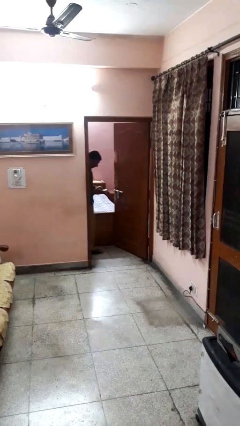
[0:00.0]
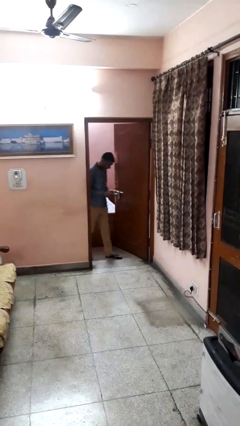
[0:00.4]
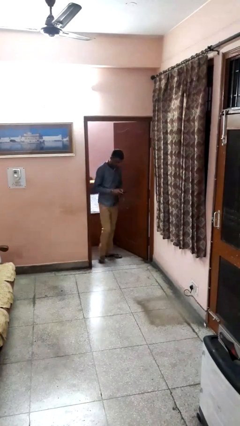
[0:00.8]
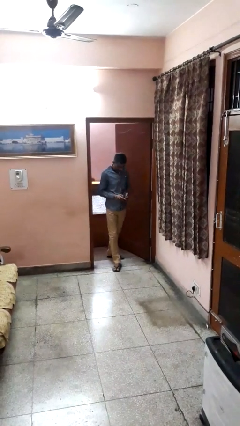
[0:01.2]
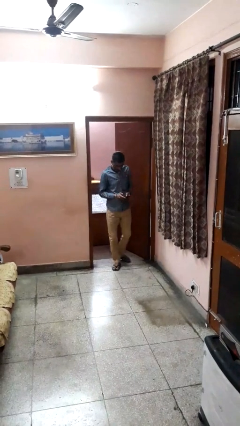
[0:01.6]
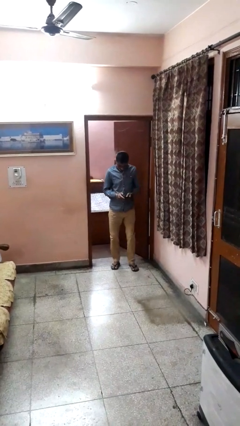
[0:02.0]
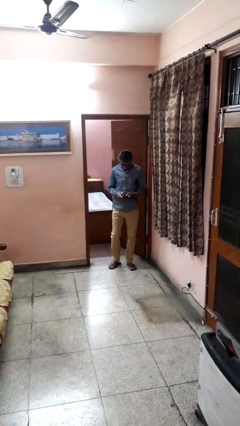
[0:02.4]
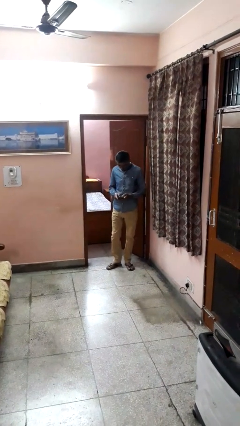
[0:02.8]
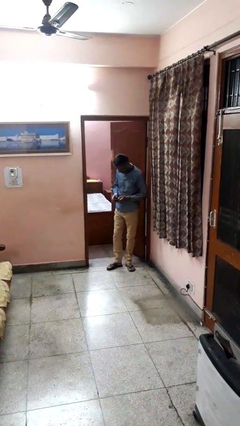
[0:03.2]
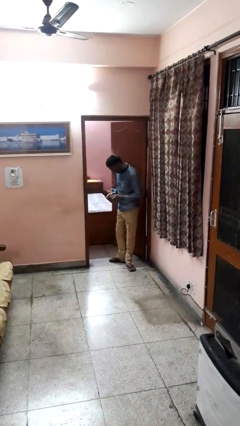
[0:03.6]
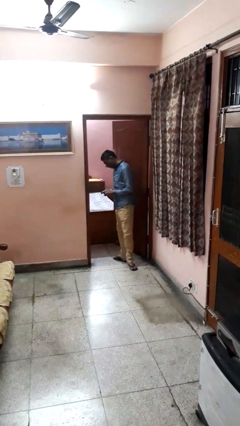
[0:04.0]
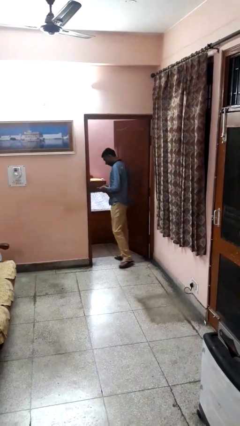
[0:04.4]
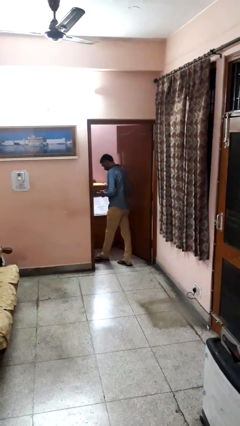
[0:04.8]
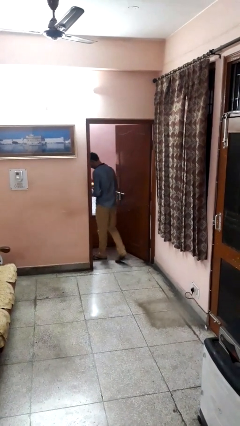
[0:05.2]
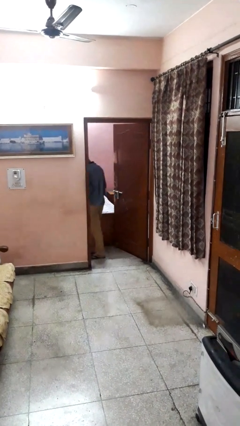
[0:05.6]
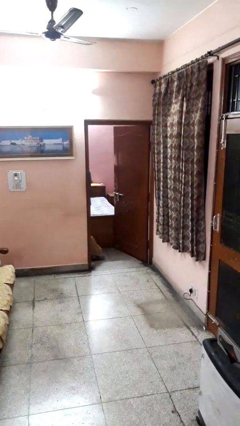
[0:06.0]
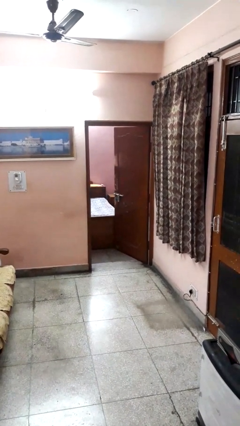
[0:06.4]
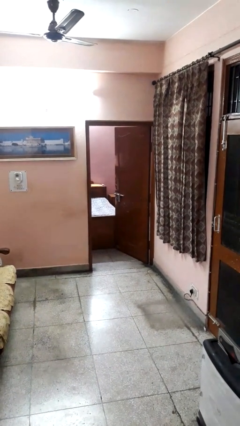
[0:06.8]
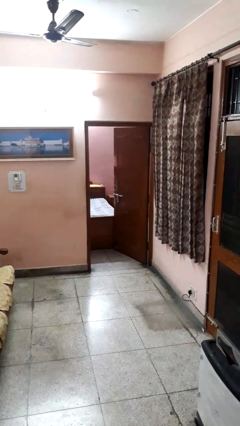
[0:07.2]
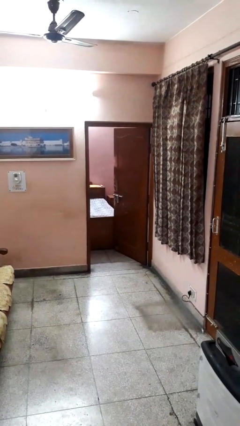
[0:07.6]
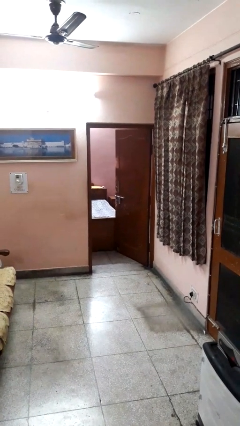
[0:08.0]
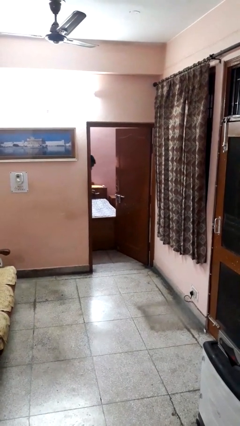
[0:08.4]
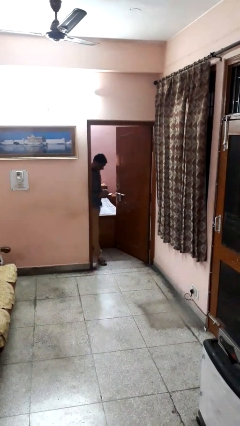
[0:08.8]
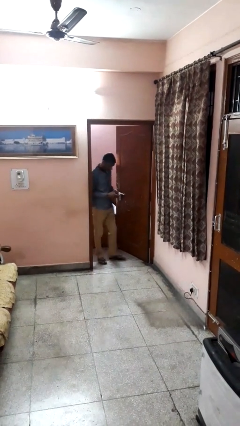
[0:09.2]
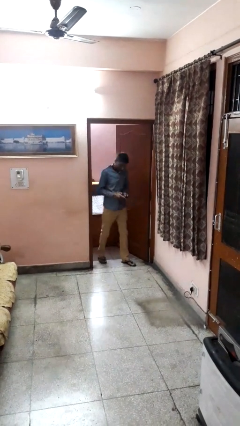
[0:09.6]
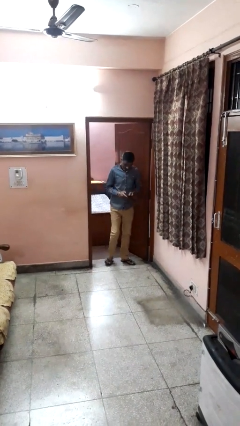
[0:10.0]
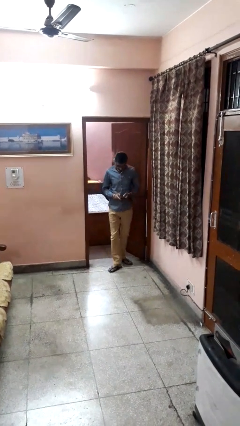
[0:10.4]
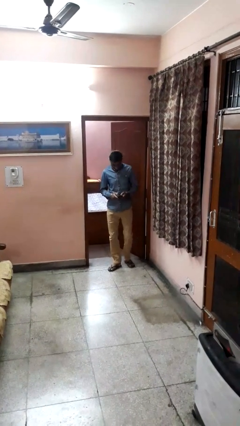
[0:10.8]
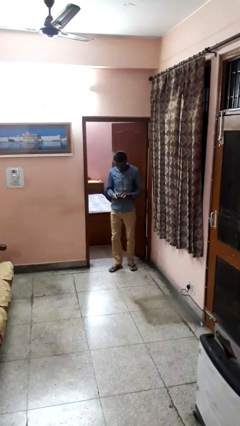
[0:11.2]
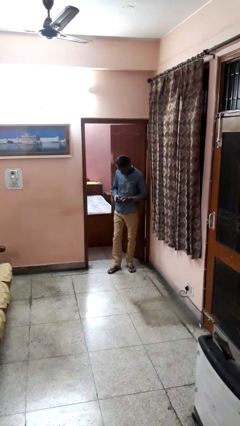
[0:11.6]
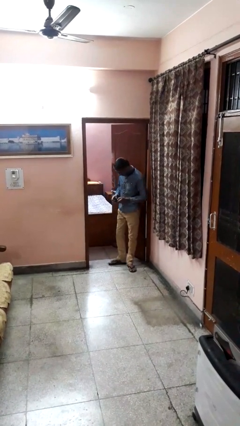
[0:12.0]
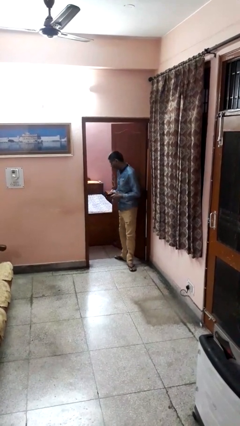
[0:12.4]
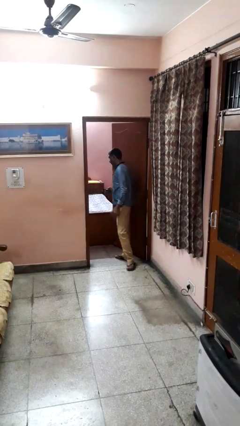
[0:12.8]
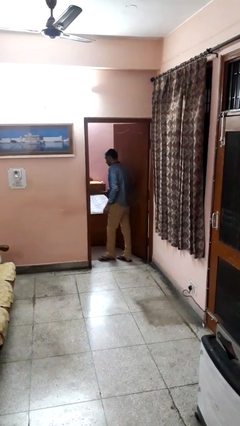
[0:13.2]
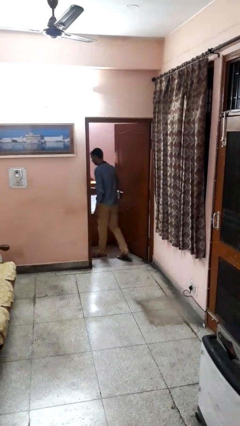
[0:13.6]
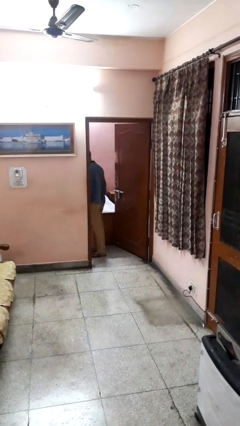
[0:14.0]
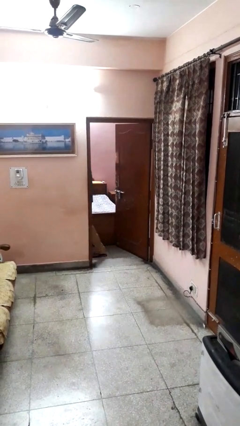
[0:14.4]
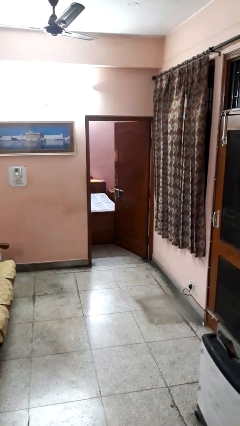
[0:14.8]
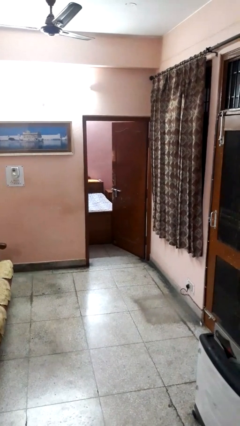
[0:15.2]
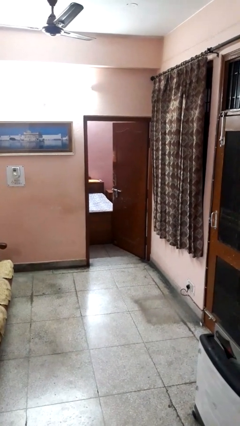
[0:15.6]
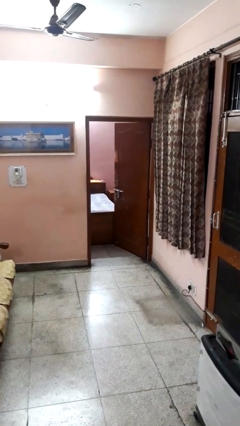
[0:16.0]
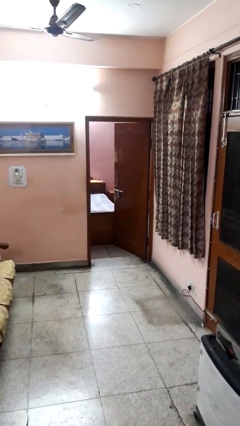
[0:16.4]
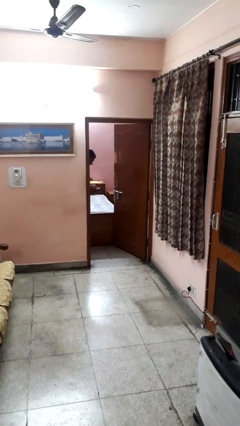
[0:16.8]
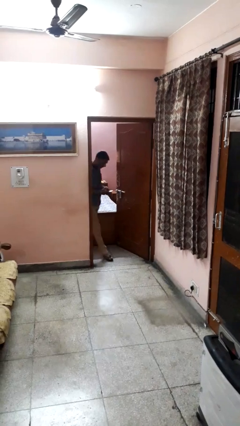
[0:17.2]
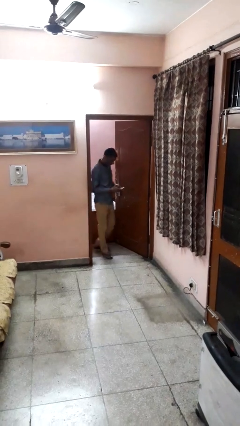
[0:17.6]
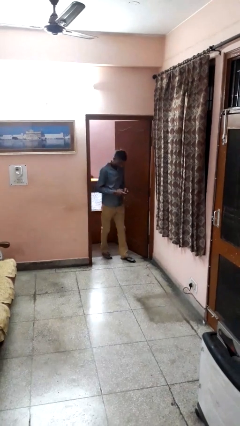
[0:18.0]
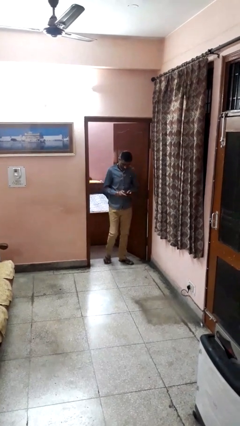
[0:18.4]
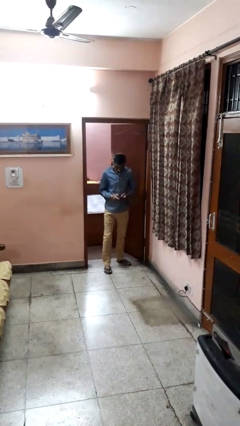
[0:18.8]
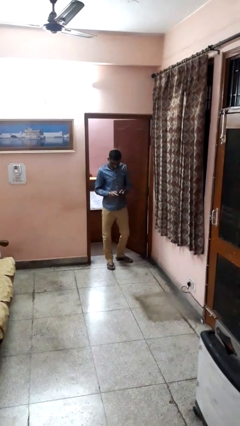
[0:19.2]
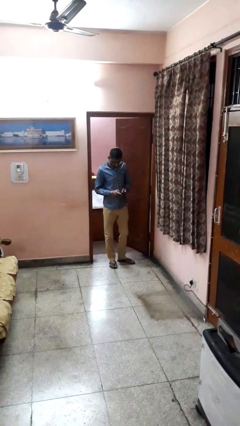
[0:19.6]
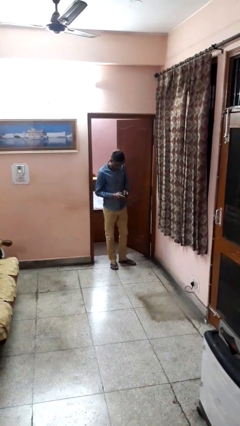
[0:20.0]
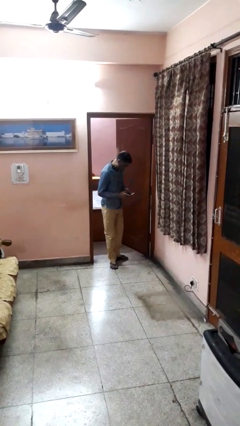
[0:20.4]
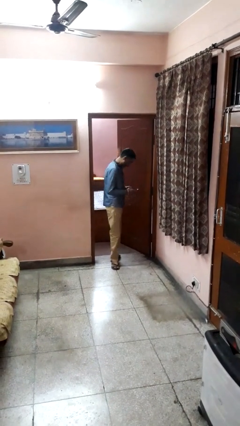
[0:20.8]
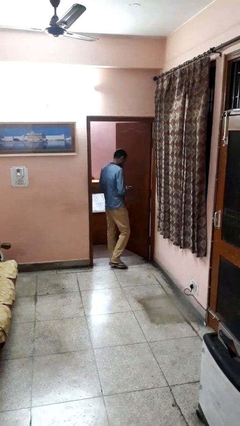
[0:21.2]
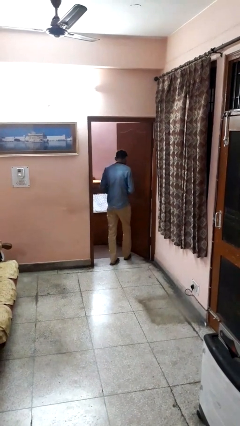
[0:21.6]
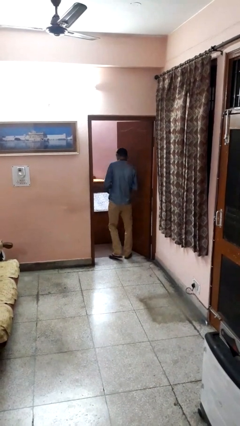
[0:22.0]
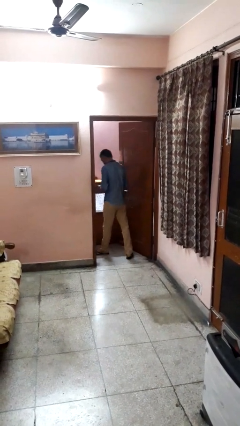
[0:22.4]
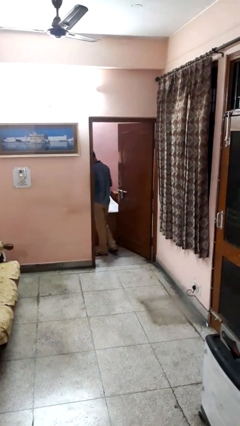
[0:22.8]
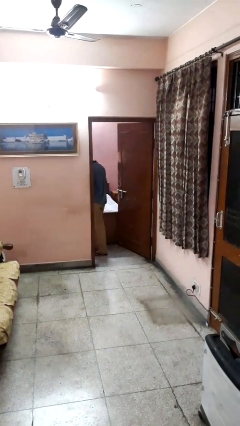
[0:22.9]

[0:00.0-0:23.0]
person texts on phone

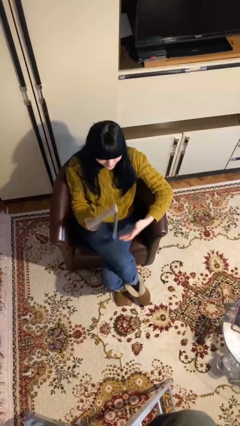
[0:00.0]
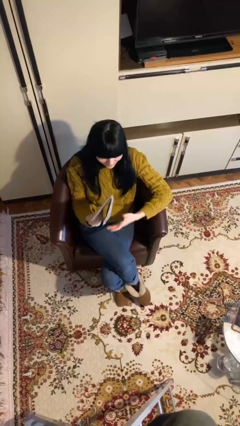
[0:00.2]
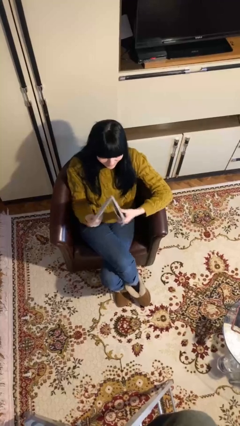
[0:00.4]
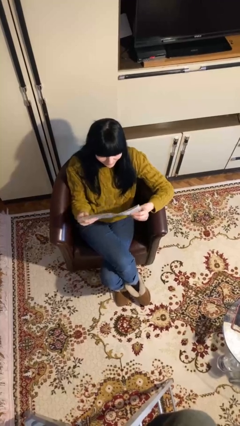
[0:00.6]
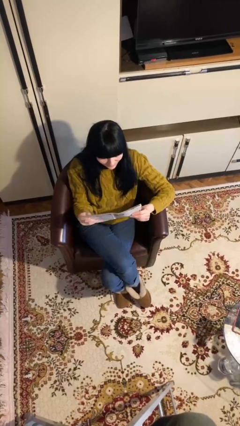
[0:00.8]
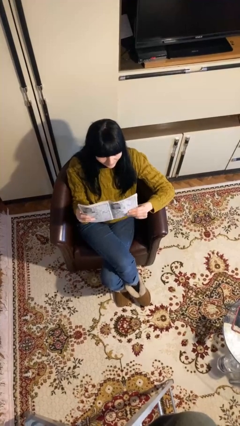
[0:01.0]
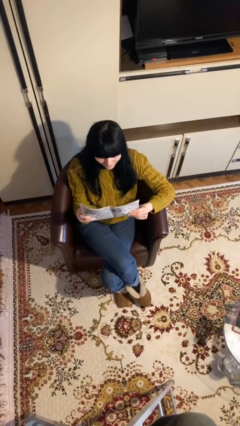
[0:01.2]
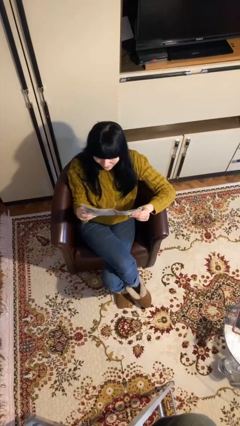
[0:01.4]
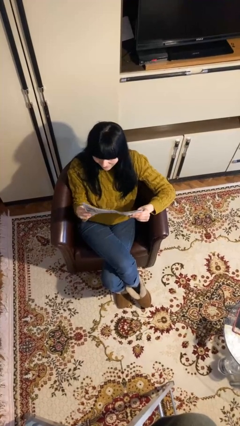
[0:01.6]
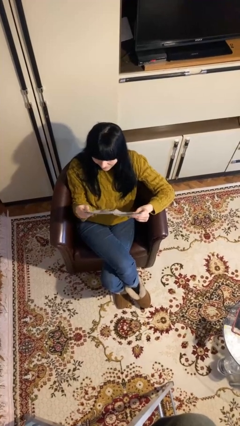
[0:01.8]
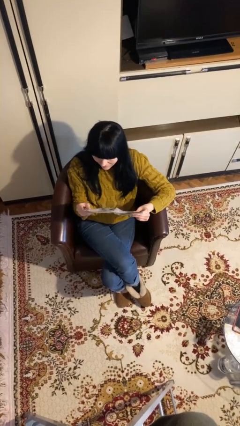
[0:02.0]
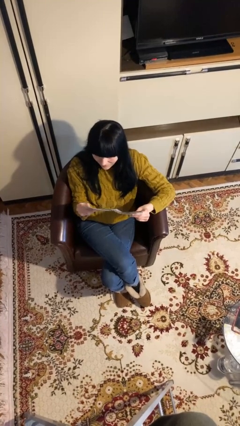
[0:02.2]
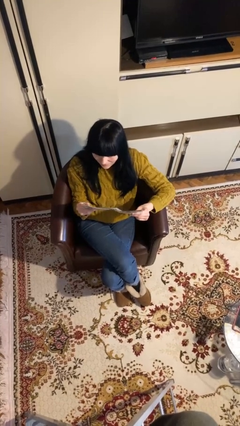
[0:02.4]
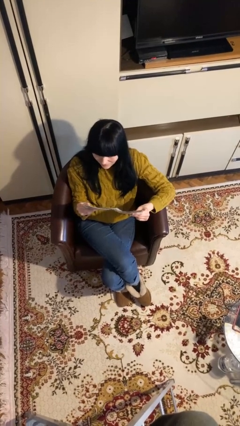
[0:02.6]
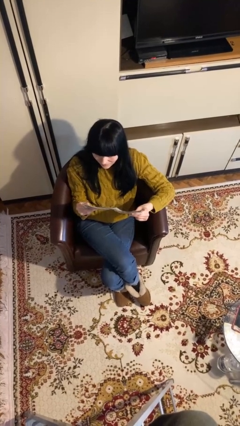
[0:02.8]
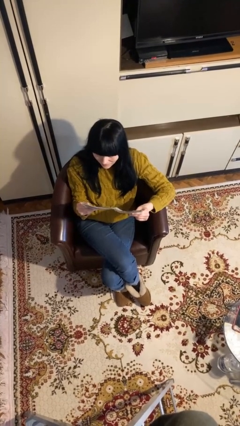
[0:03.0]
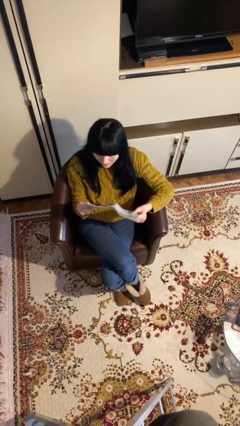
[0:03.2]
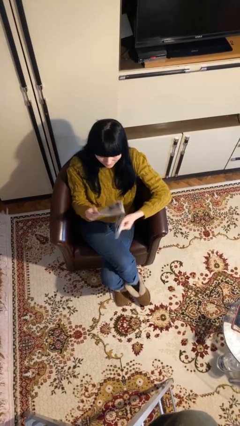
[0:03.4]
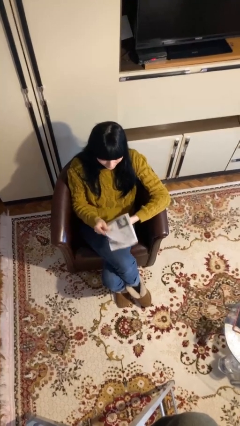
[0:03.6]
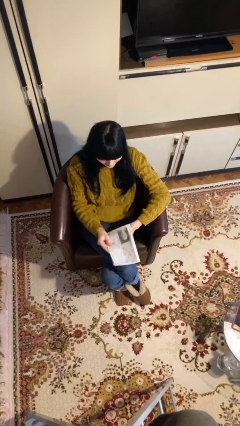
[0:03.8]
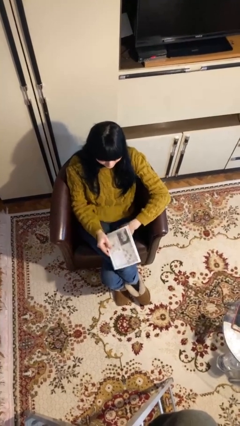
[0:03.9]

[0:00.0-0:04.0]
person reads document

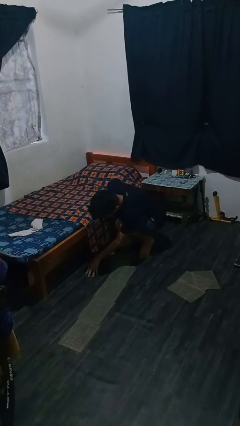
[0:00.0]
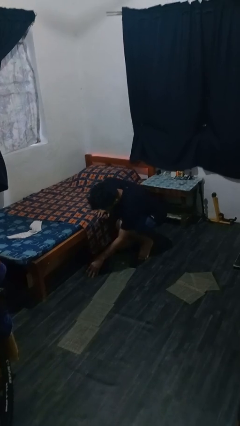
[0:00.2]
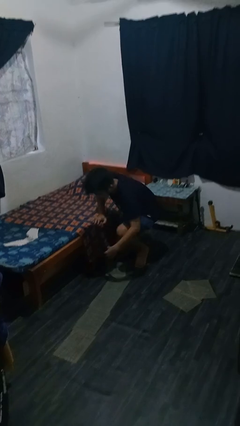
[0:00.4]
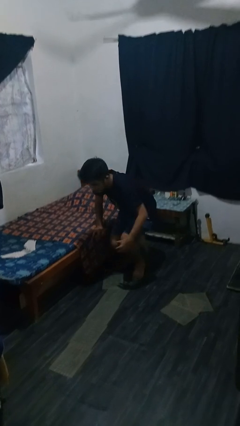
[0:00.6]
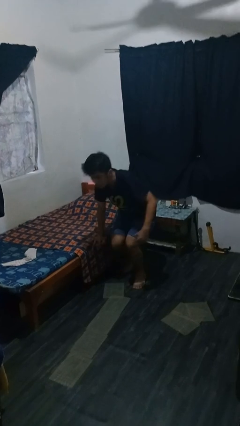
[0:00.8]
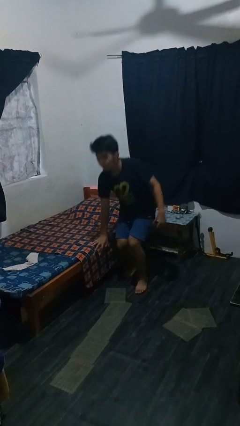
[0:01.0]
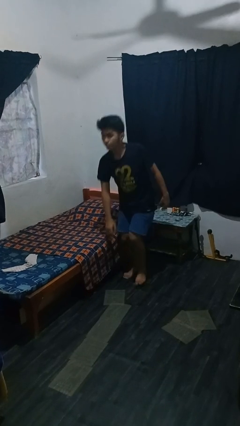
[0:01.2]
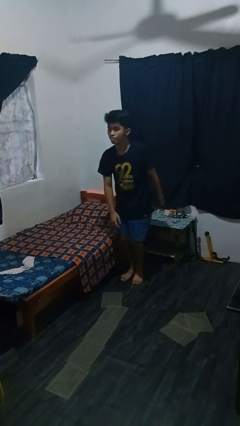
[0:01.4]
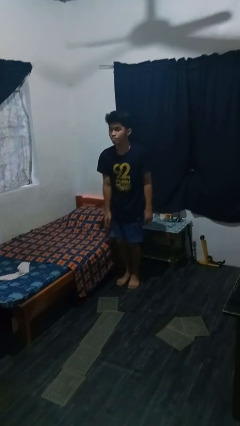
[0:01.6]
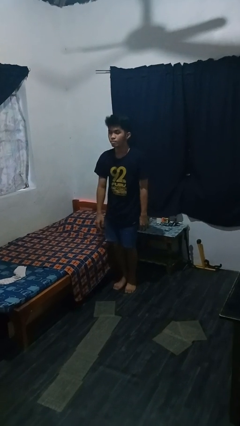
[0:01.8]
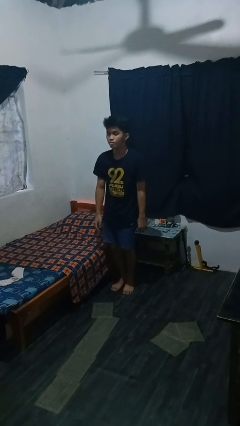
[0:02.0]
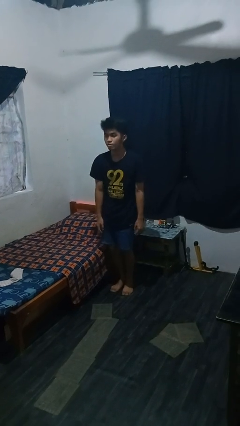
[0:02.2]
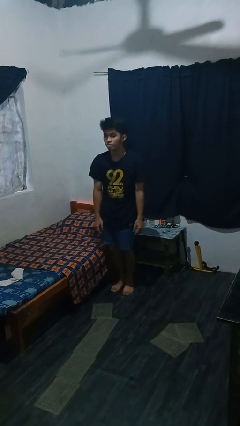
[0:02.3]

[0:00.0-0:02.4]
person stands up from floor
